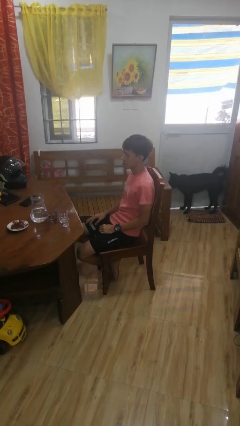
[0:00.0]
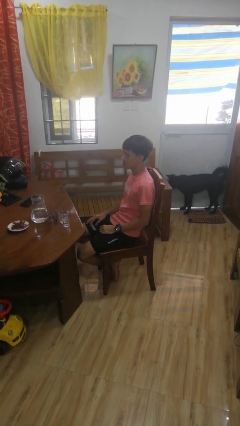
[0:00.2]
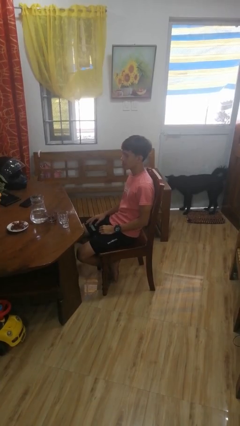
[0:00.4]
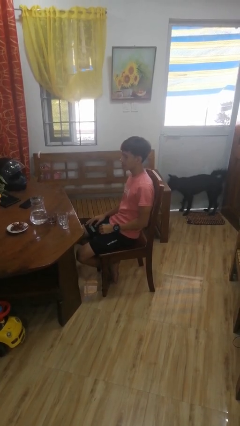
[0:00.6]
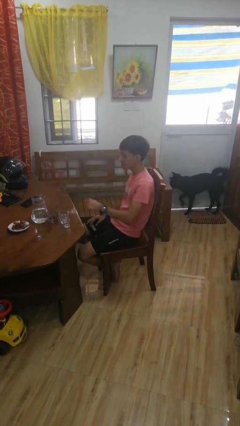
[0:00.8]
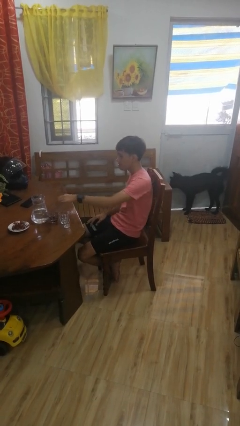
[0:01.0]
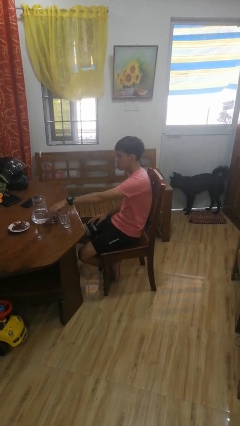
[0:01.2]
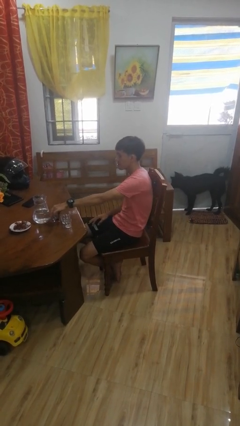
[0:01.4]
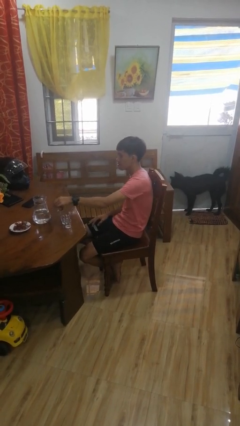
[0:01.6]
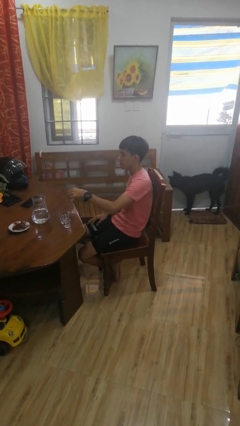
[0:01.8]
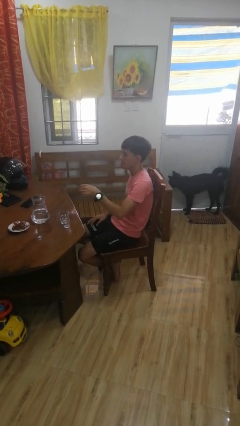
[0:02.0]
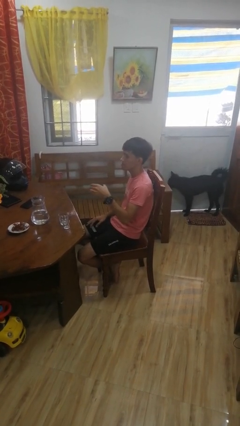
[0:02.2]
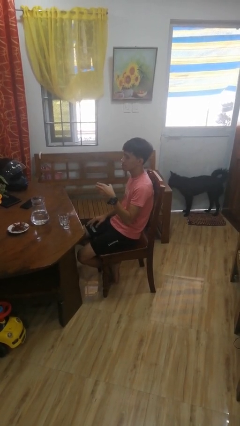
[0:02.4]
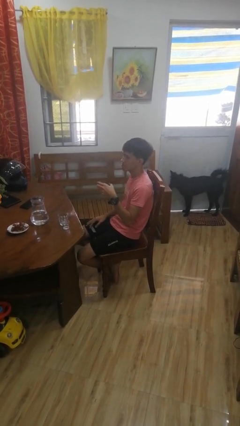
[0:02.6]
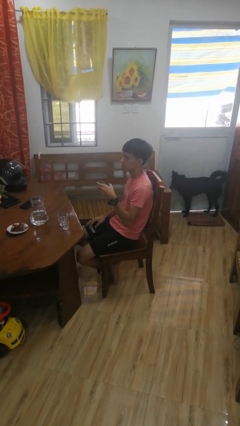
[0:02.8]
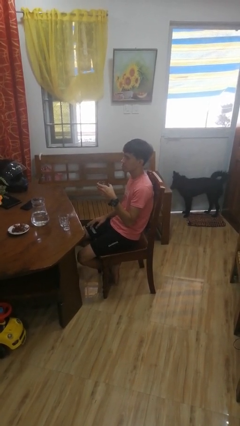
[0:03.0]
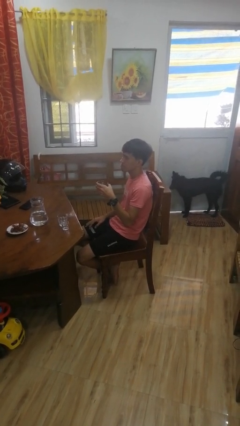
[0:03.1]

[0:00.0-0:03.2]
person picks up object from table

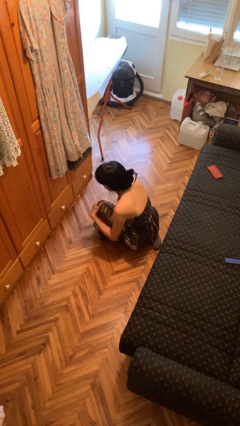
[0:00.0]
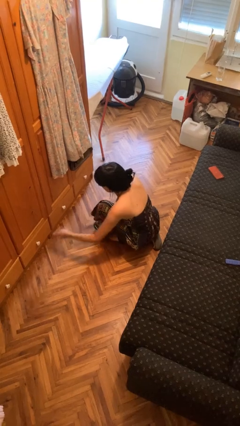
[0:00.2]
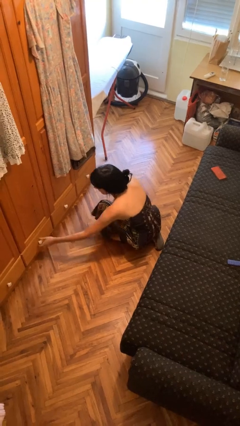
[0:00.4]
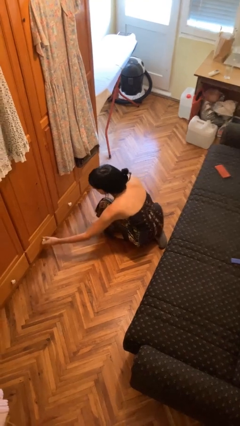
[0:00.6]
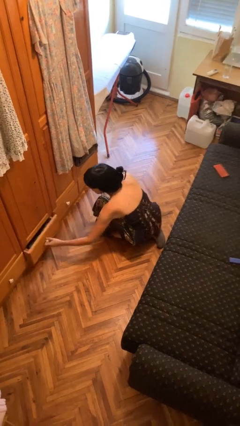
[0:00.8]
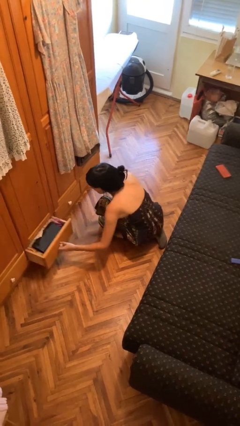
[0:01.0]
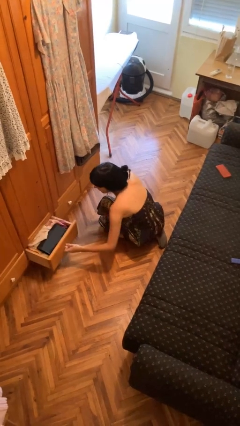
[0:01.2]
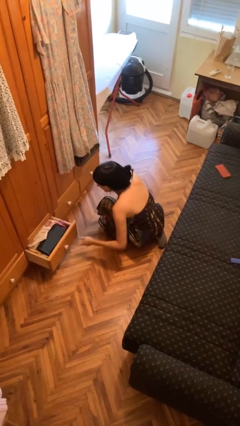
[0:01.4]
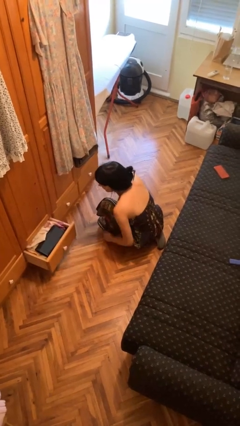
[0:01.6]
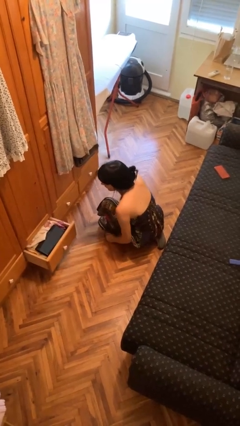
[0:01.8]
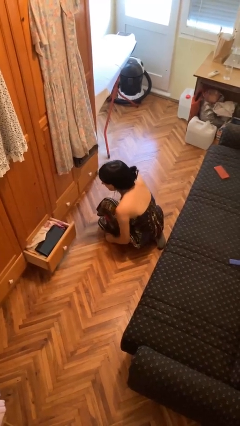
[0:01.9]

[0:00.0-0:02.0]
person opens dresser drawer

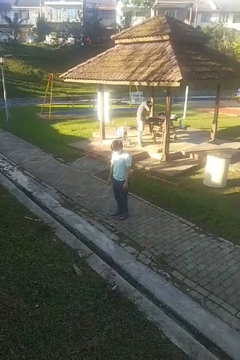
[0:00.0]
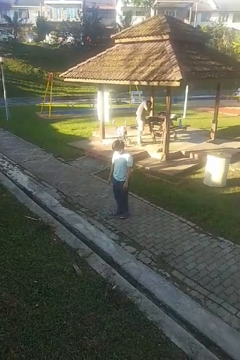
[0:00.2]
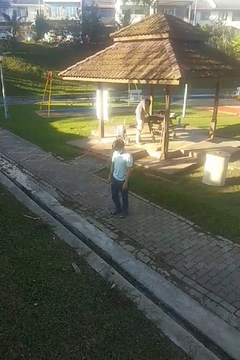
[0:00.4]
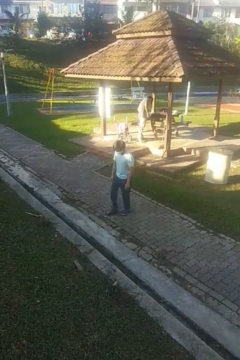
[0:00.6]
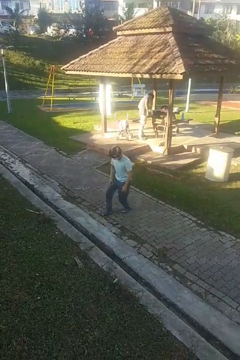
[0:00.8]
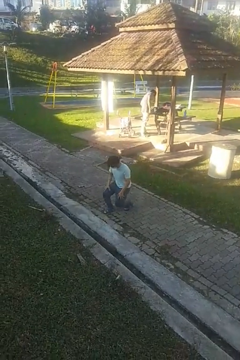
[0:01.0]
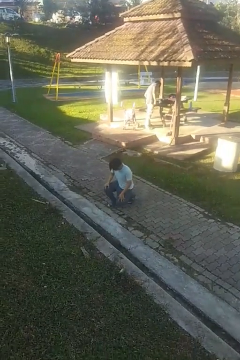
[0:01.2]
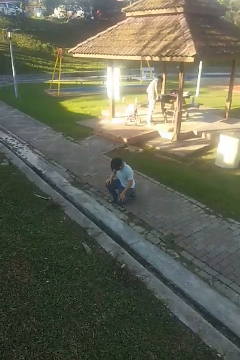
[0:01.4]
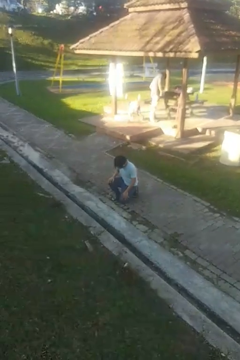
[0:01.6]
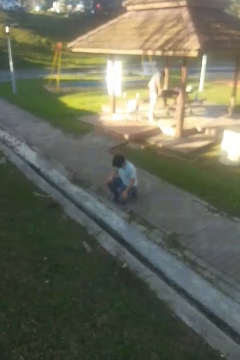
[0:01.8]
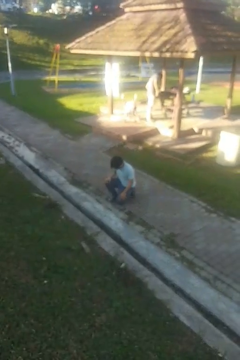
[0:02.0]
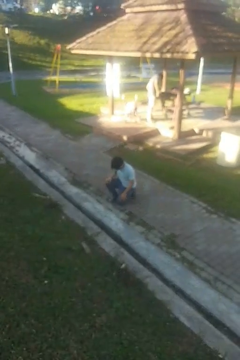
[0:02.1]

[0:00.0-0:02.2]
person kneels

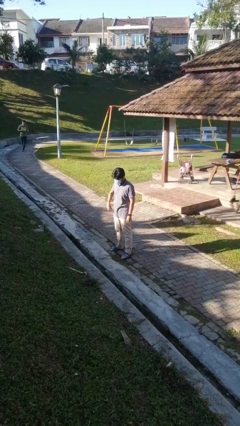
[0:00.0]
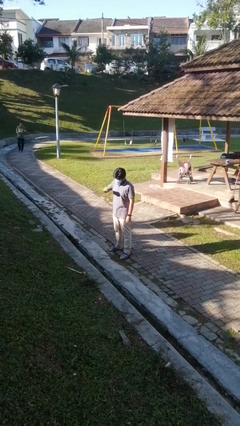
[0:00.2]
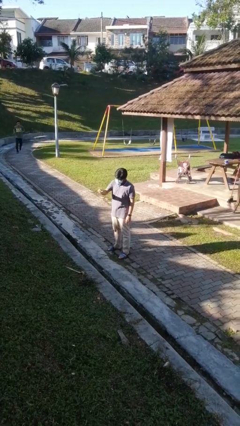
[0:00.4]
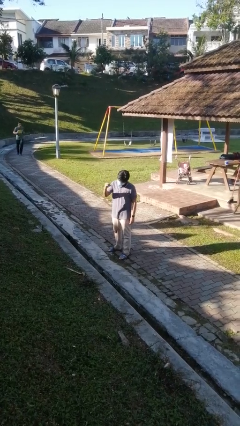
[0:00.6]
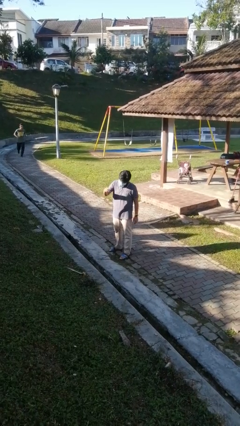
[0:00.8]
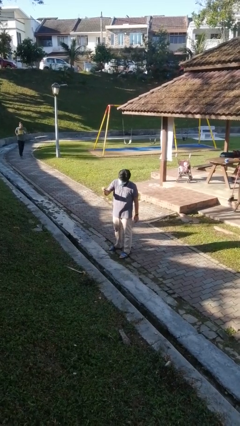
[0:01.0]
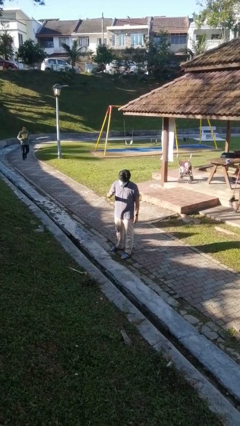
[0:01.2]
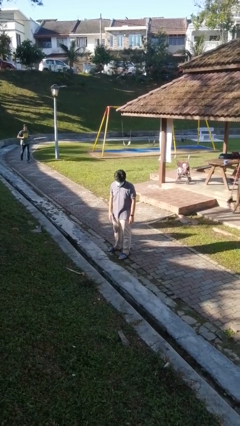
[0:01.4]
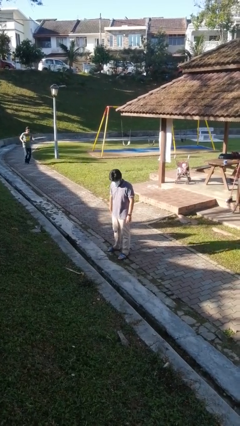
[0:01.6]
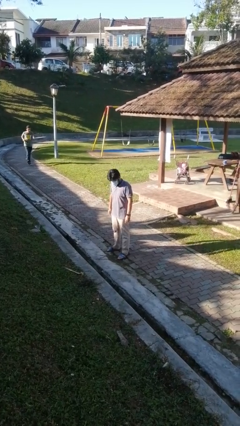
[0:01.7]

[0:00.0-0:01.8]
person snaps fingers

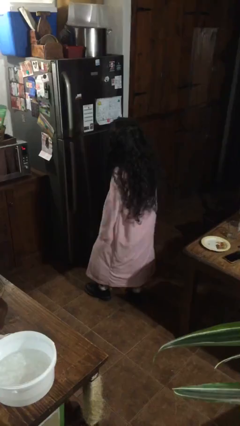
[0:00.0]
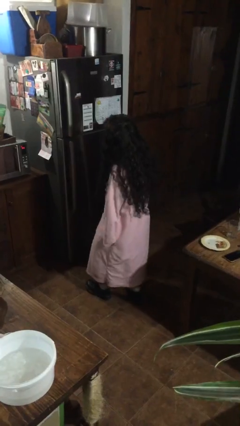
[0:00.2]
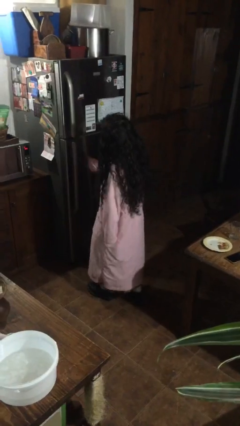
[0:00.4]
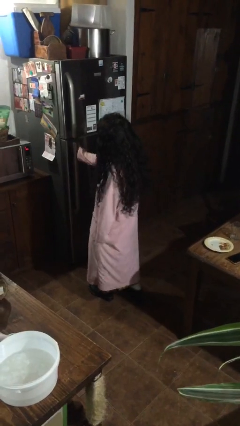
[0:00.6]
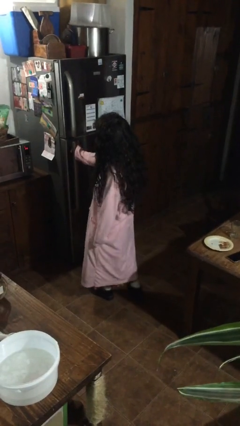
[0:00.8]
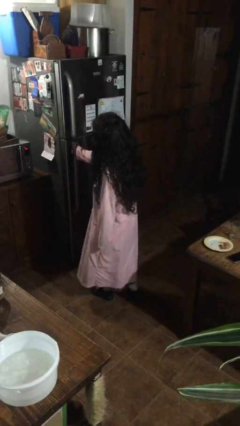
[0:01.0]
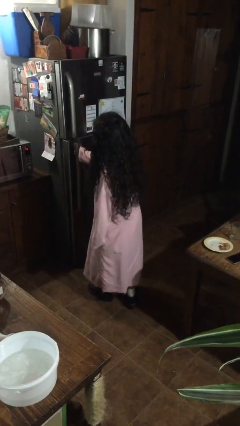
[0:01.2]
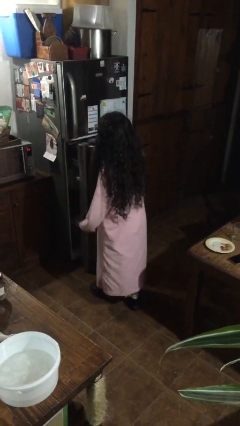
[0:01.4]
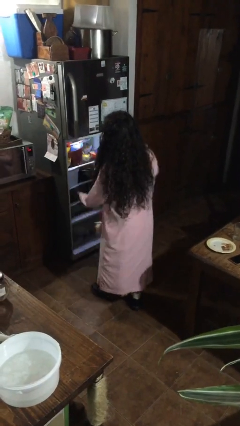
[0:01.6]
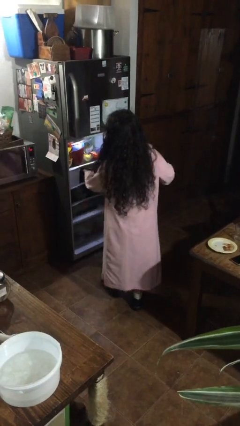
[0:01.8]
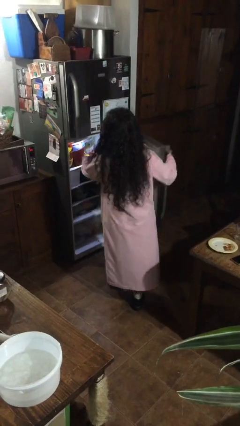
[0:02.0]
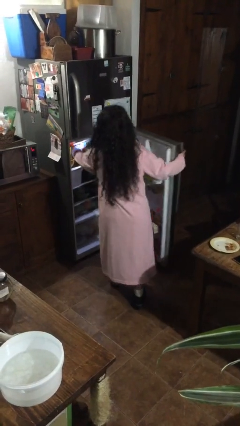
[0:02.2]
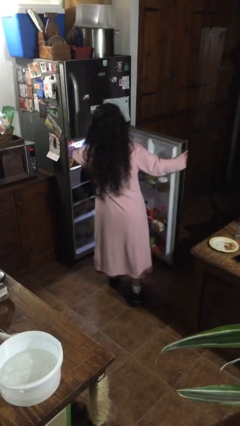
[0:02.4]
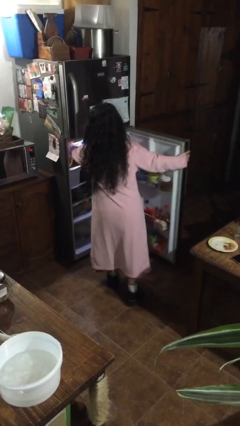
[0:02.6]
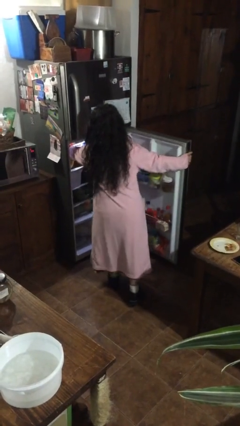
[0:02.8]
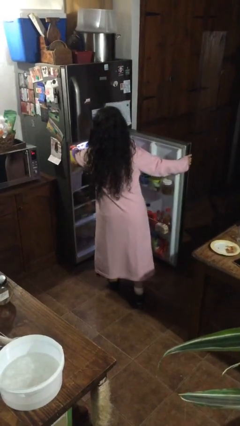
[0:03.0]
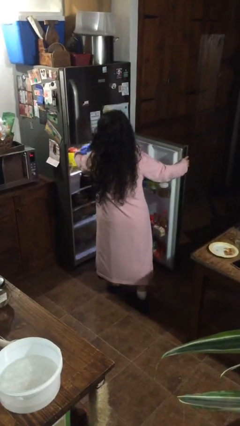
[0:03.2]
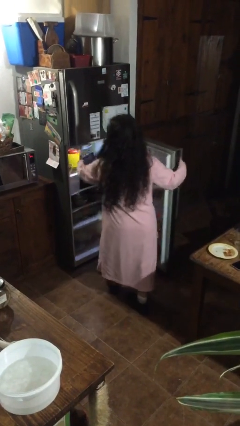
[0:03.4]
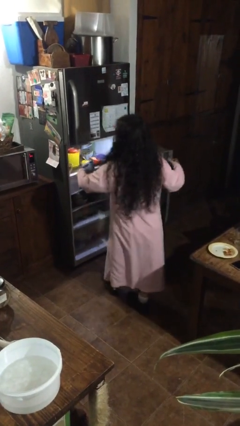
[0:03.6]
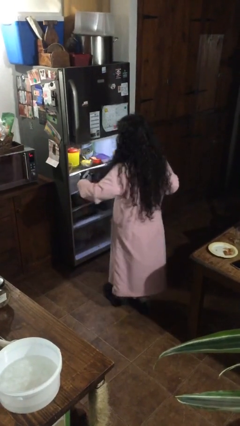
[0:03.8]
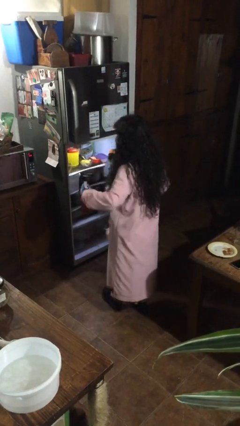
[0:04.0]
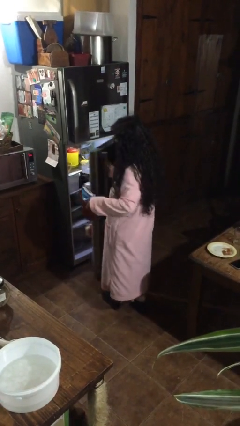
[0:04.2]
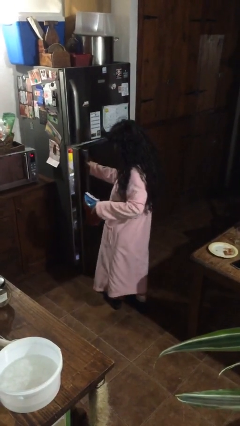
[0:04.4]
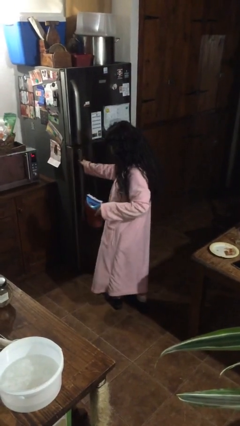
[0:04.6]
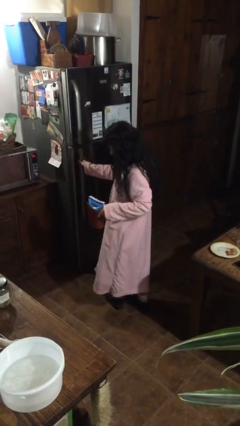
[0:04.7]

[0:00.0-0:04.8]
person takes object from refrigerator

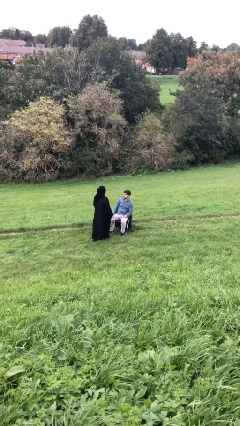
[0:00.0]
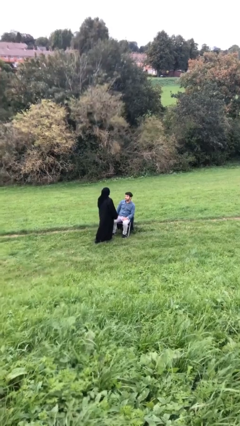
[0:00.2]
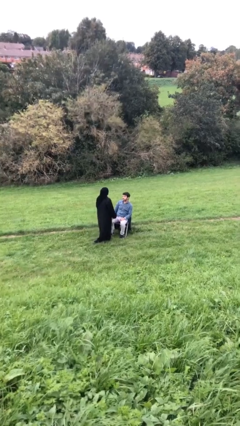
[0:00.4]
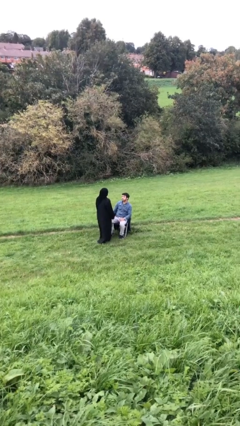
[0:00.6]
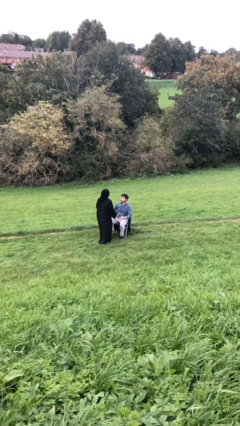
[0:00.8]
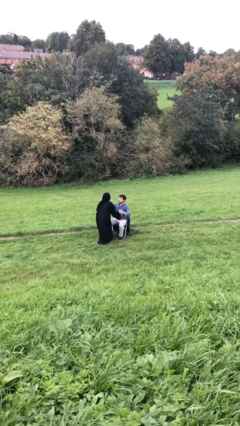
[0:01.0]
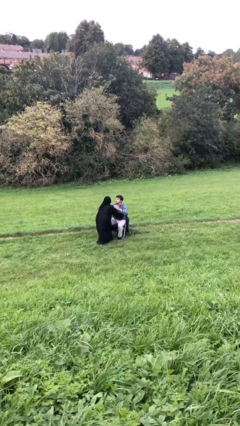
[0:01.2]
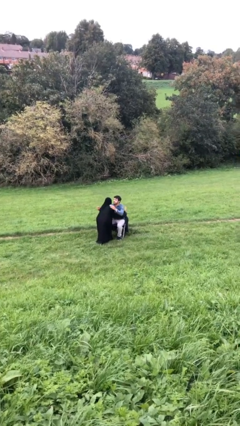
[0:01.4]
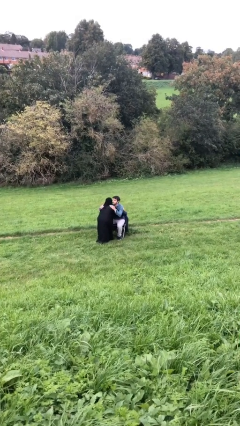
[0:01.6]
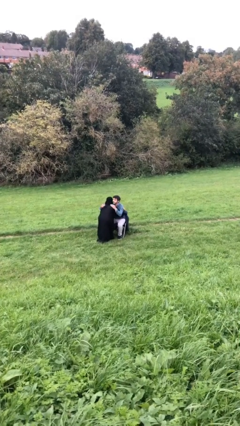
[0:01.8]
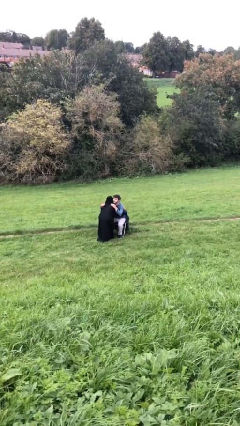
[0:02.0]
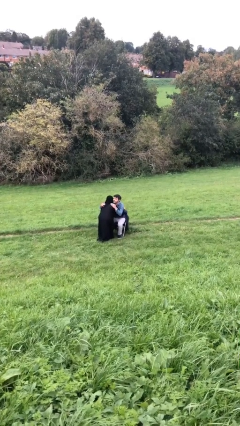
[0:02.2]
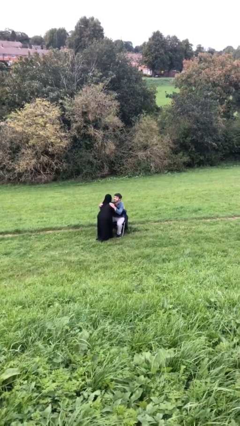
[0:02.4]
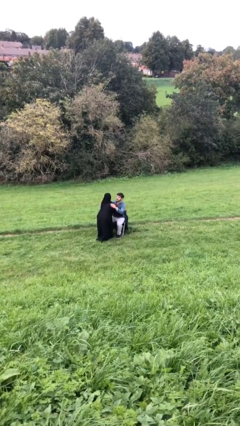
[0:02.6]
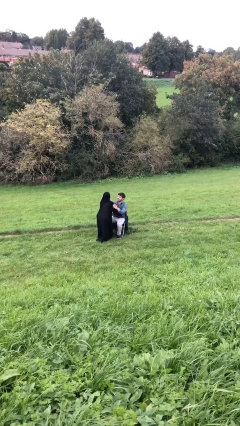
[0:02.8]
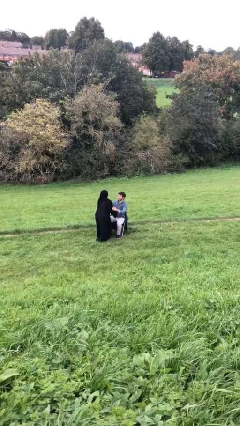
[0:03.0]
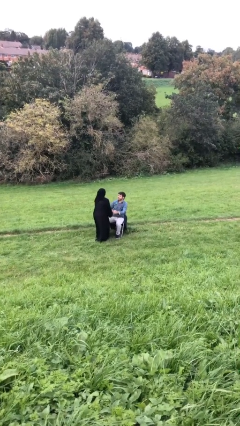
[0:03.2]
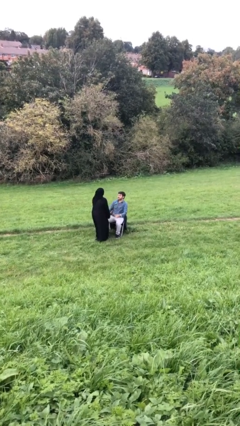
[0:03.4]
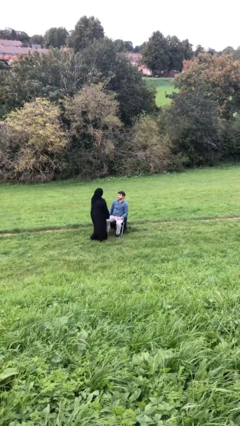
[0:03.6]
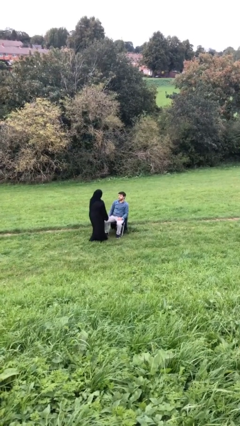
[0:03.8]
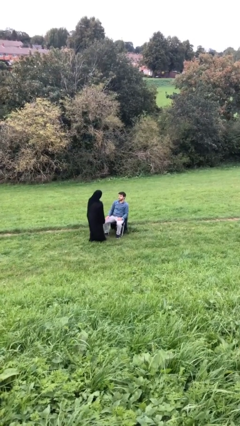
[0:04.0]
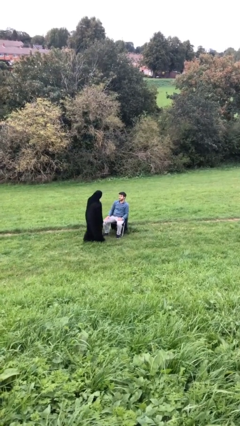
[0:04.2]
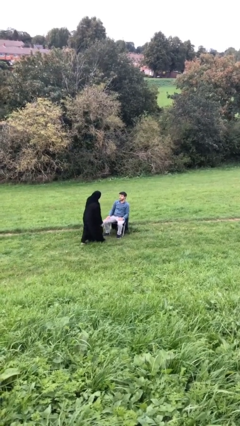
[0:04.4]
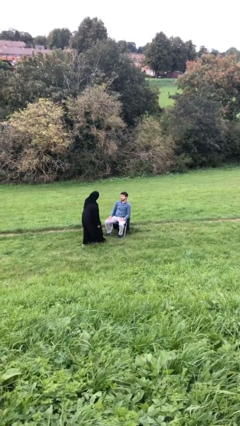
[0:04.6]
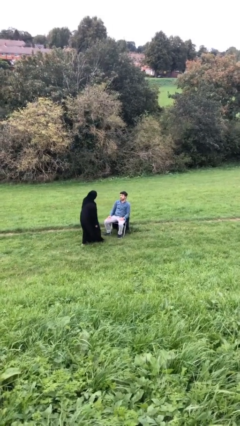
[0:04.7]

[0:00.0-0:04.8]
person embraces person
